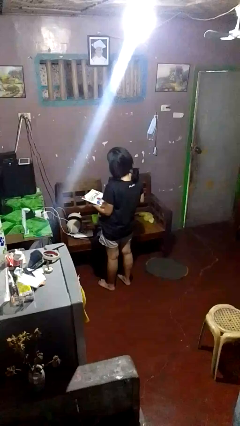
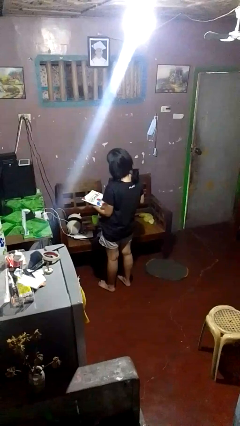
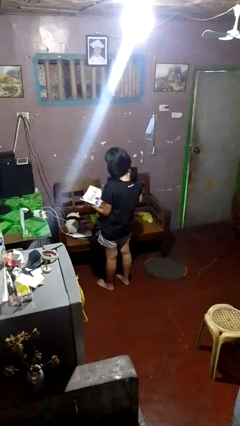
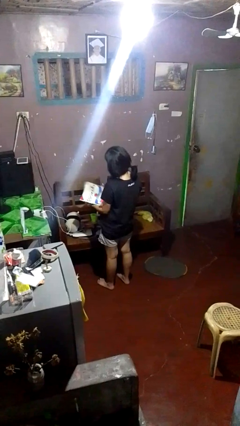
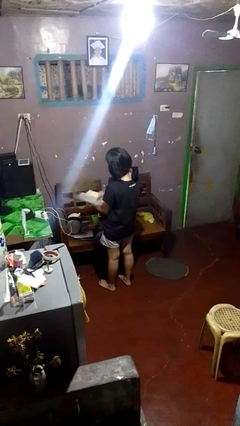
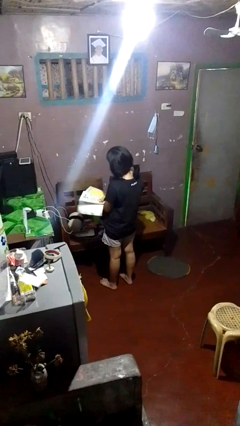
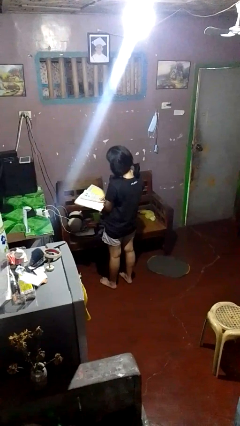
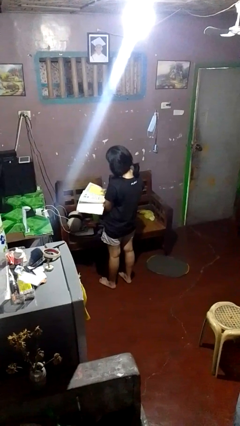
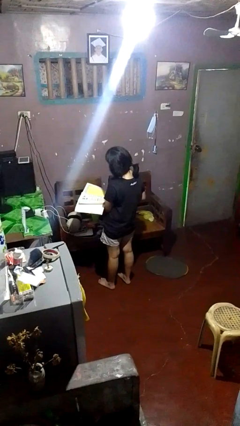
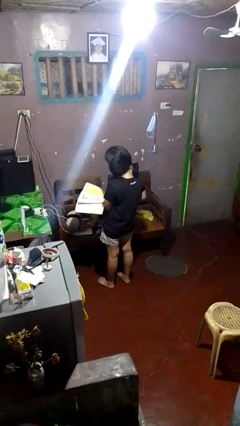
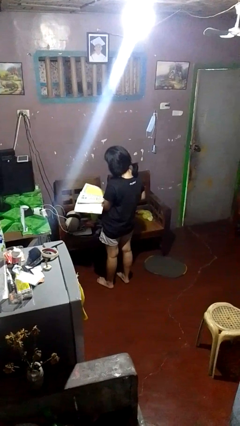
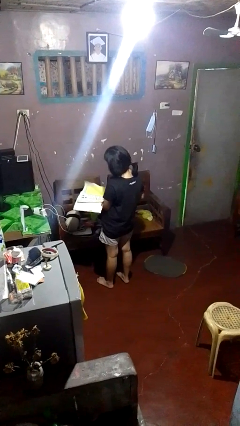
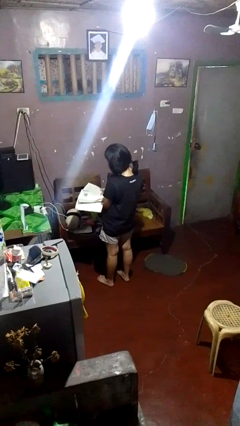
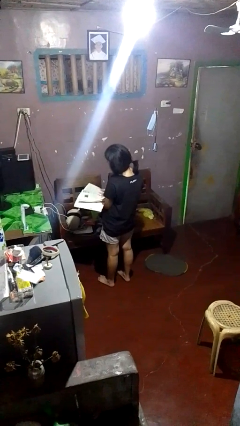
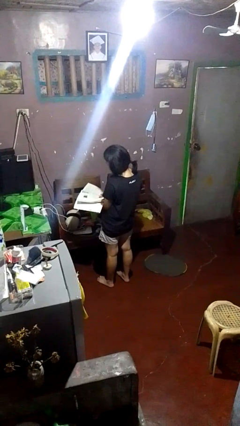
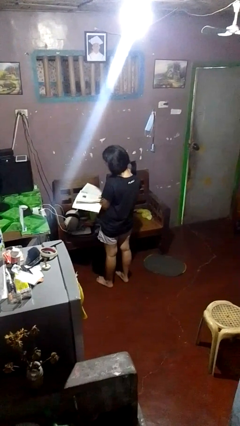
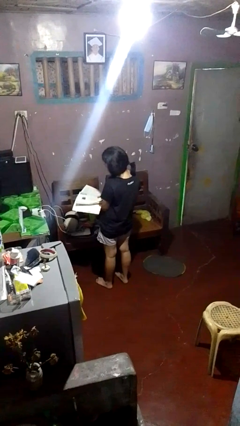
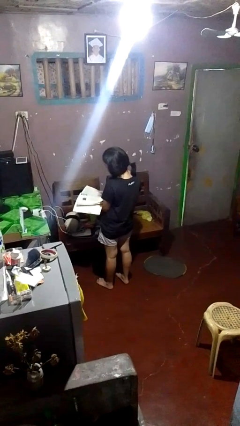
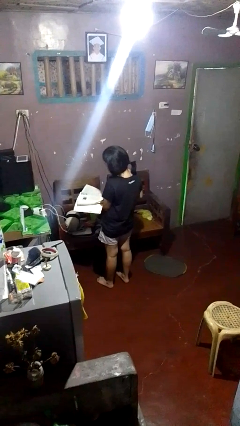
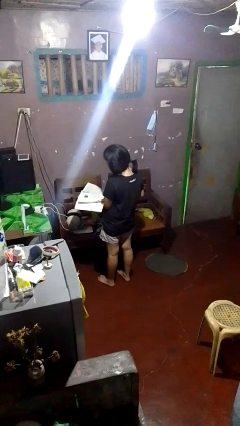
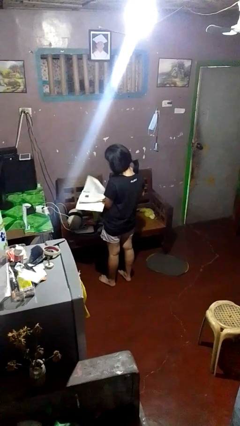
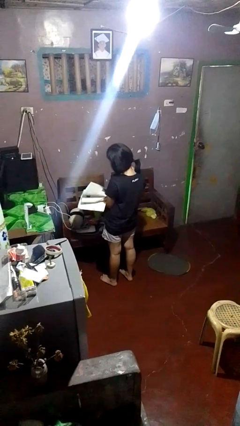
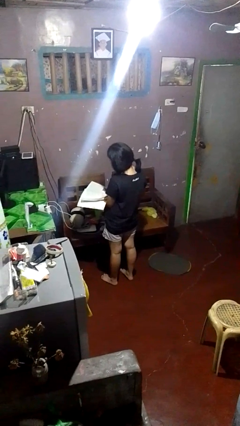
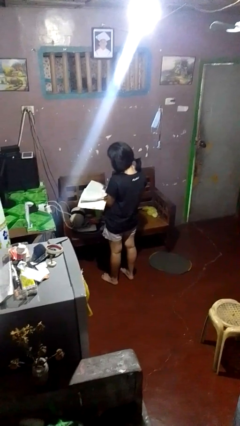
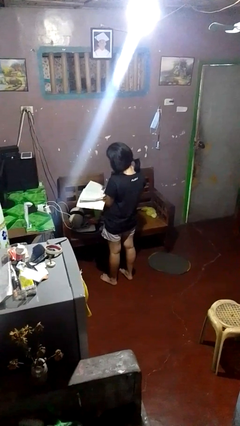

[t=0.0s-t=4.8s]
person reads book

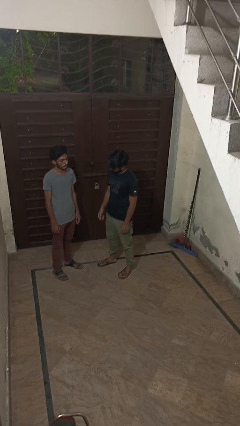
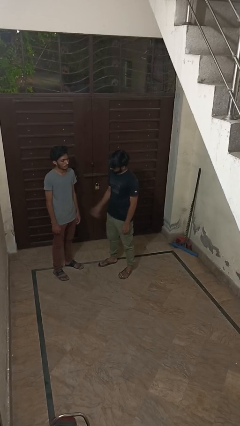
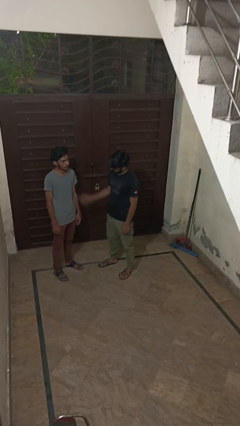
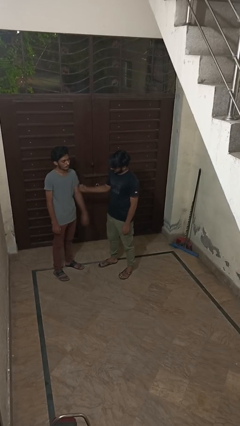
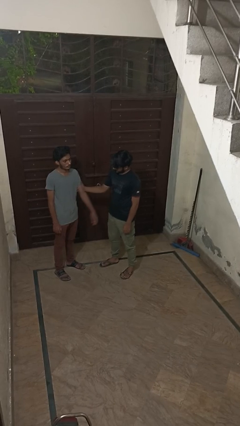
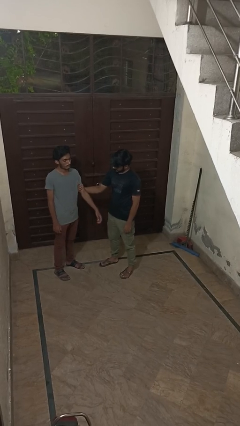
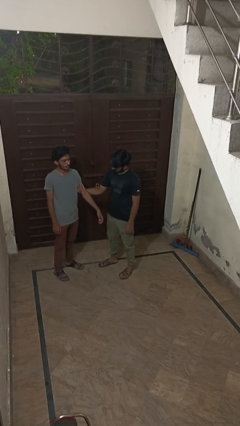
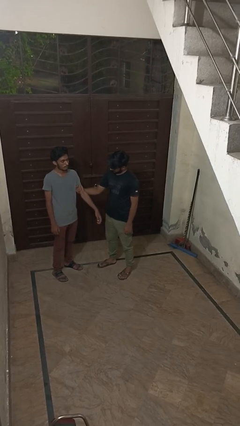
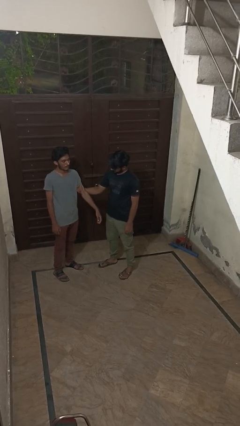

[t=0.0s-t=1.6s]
person grabs person by bicep

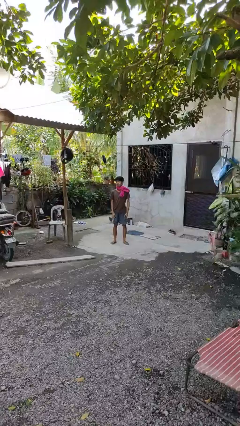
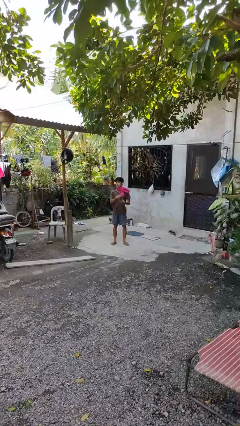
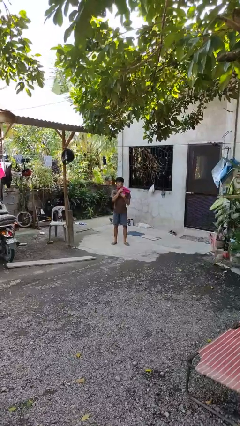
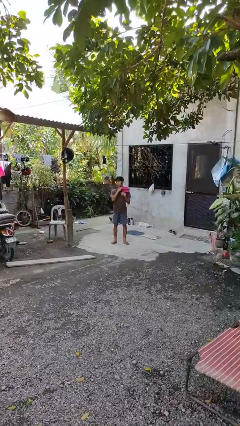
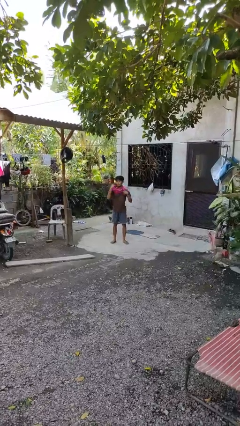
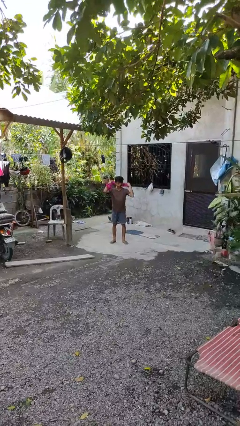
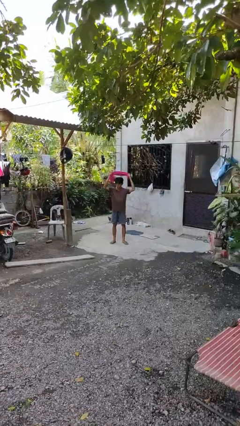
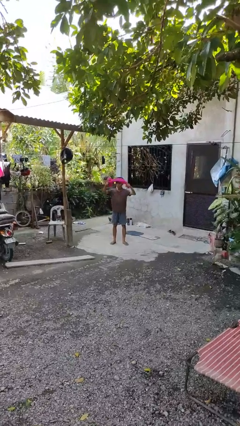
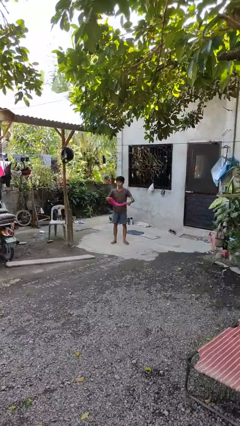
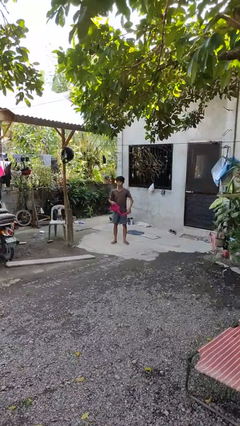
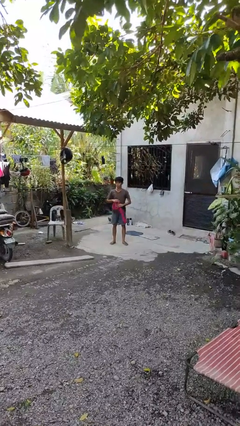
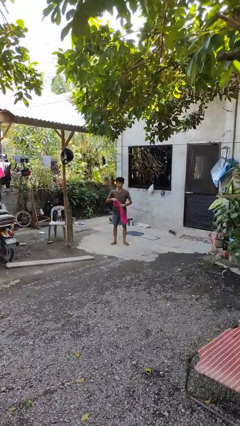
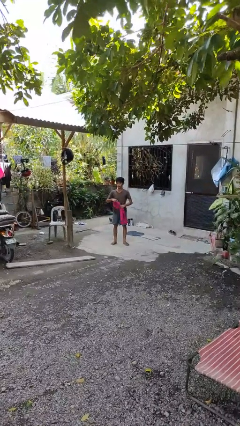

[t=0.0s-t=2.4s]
person takes off scarf

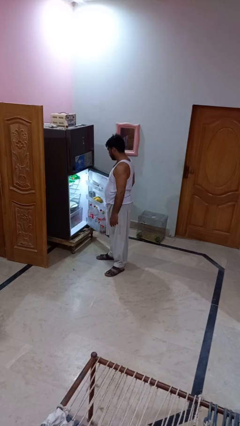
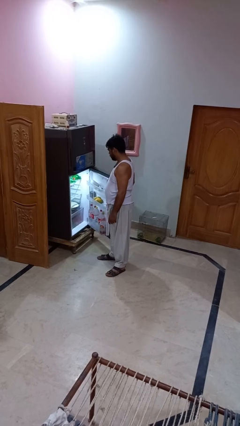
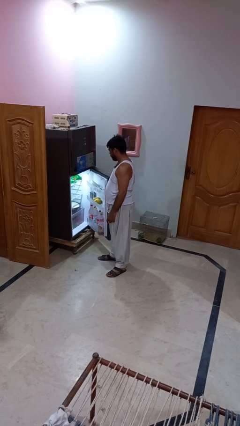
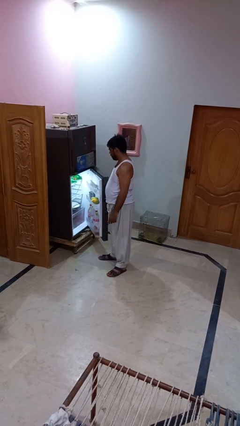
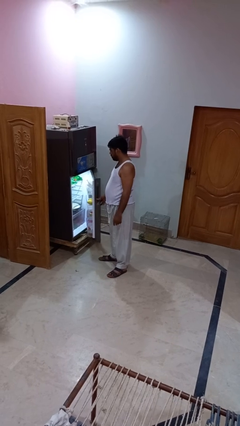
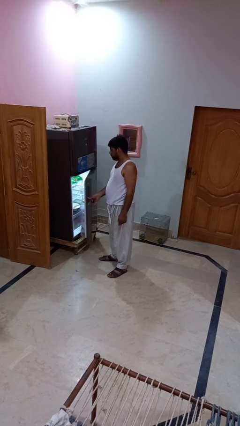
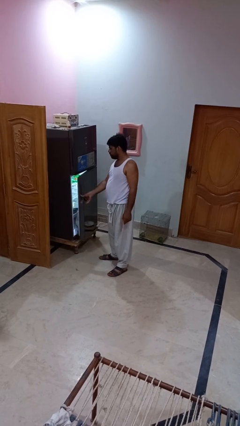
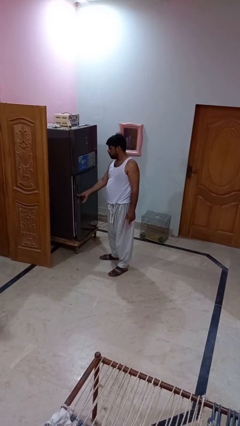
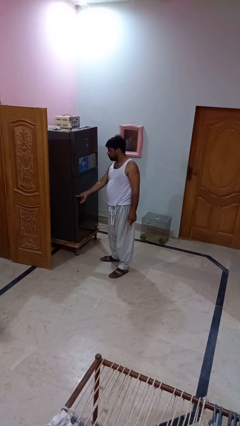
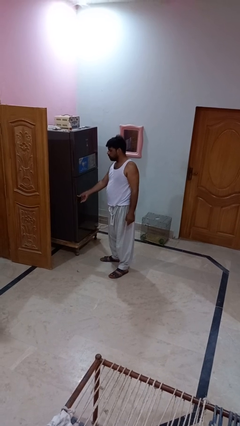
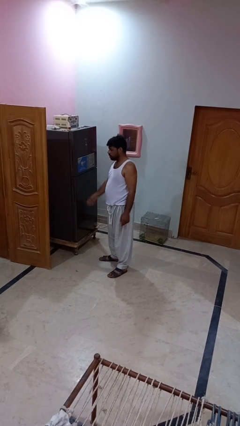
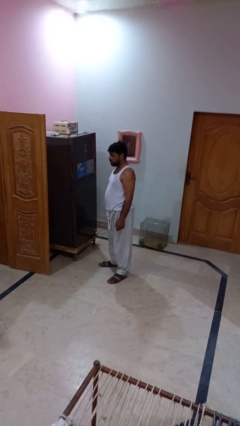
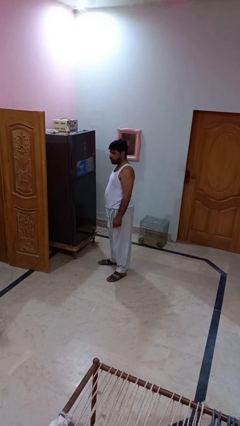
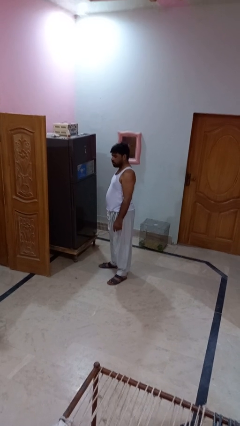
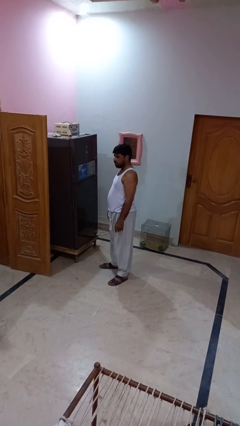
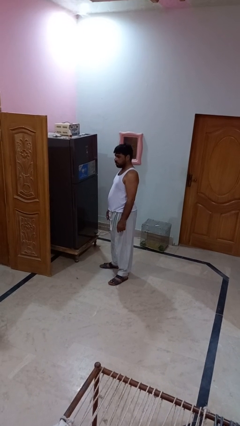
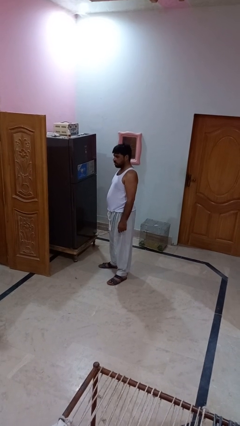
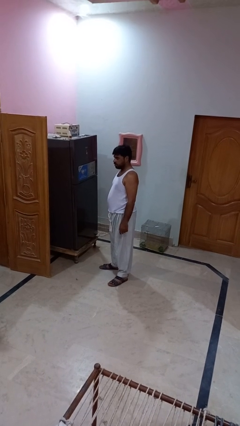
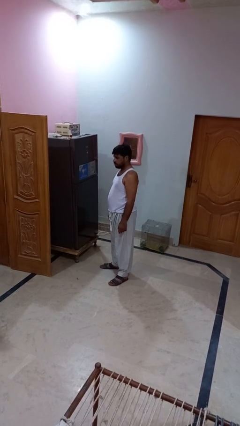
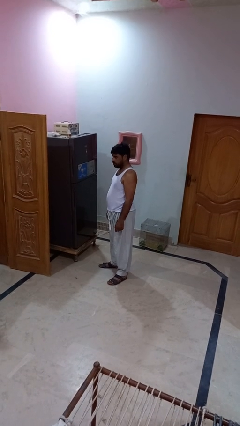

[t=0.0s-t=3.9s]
person closes refrigerator

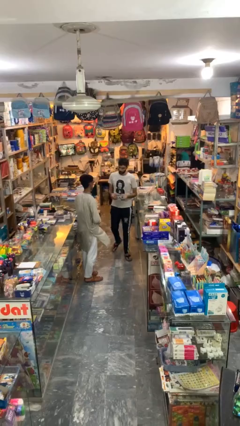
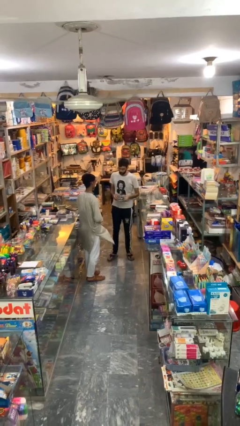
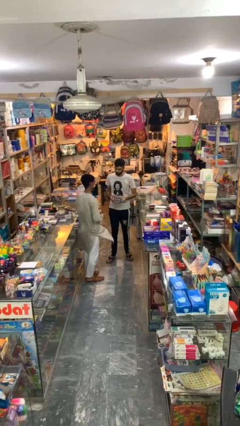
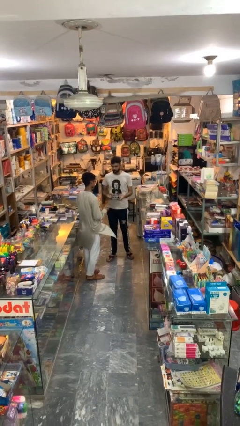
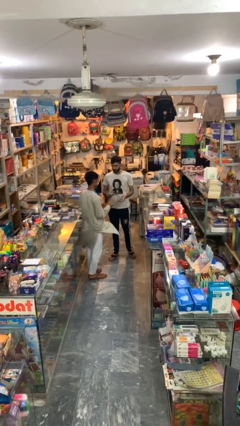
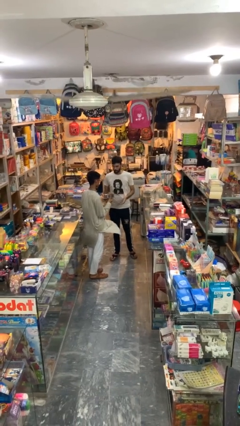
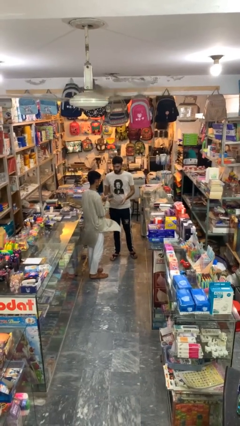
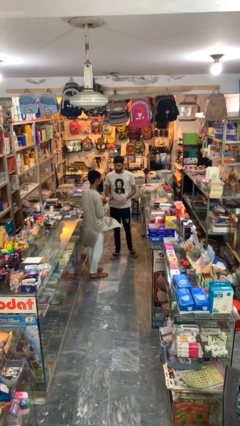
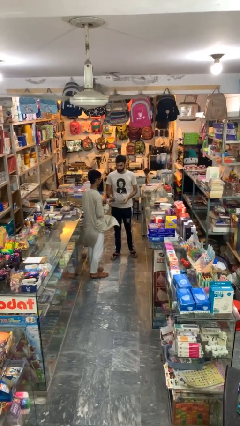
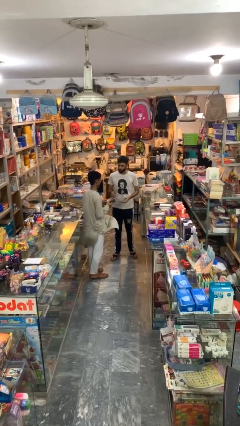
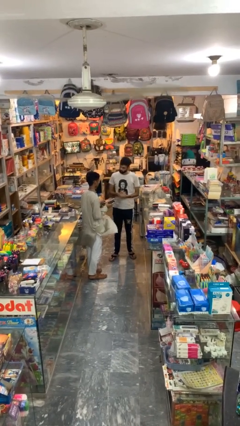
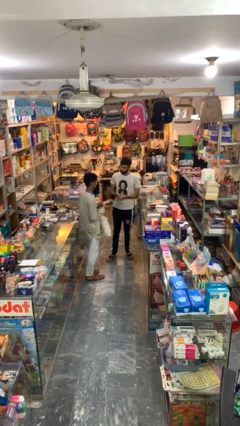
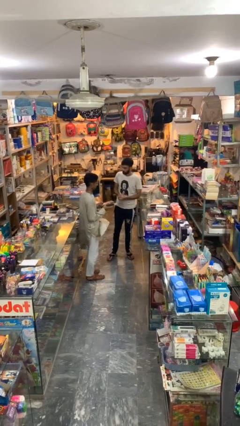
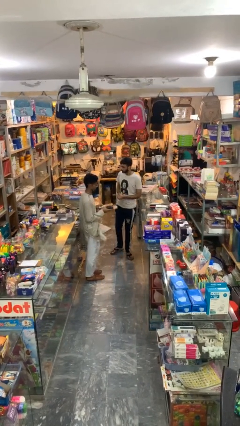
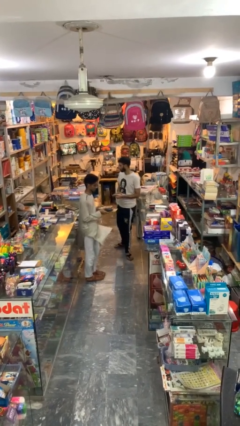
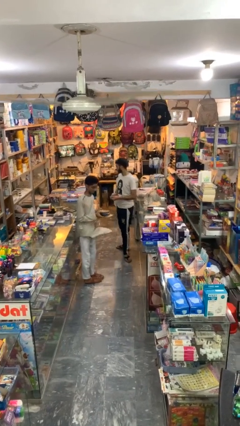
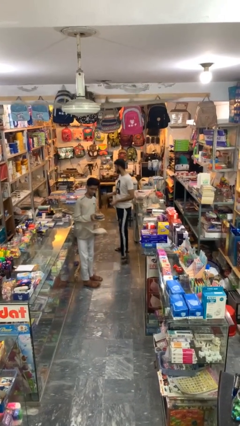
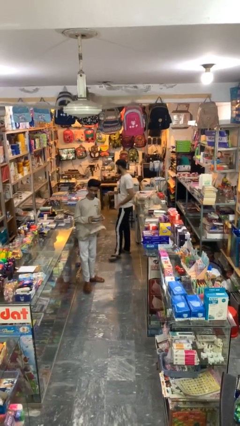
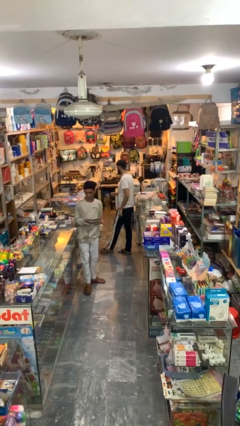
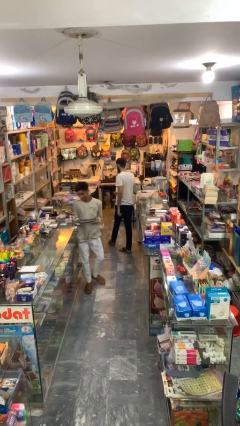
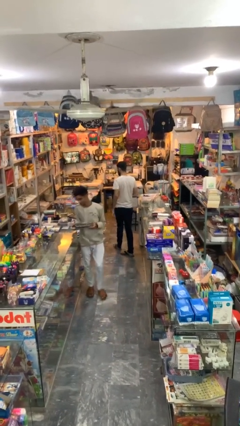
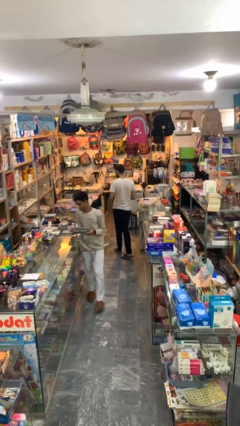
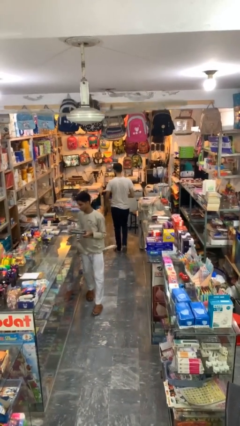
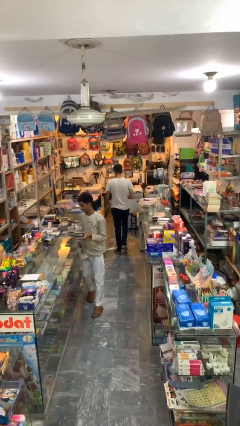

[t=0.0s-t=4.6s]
person transfers object to person

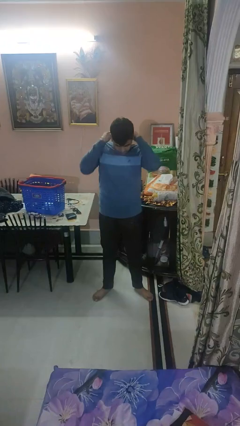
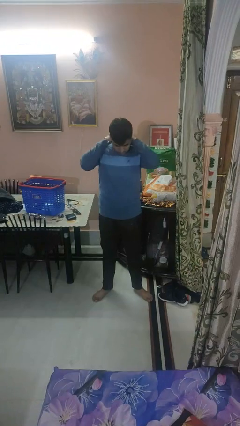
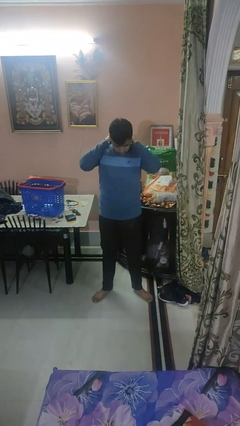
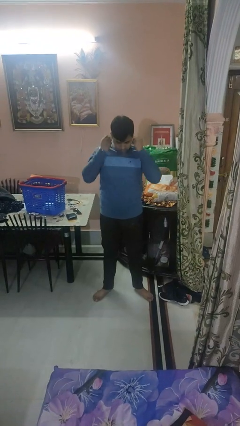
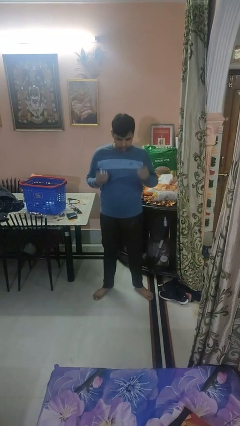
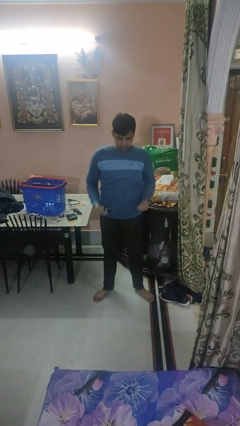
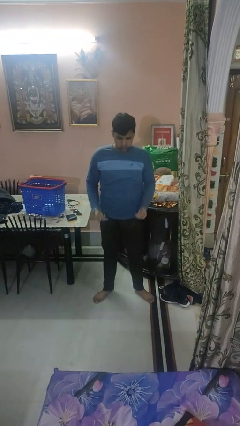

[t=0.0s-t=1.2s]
person takes off necklace
